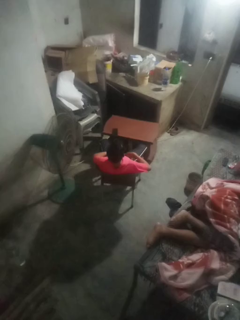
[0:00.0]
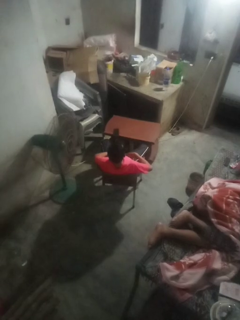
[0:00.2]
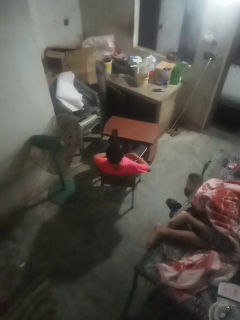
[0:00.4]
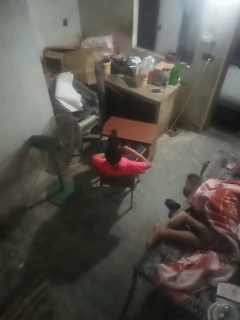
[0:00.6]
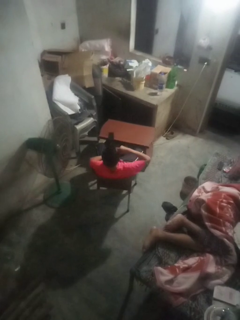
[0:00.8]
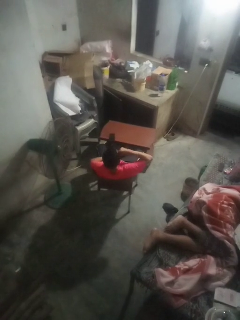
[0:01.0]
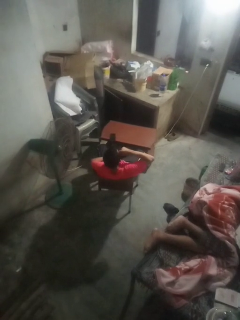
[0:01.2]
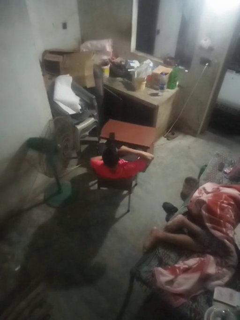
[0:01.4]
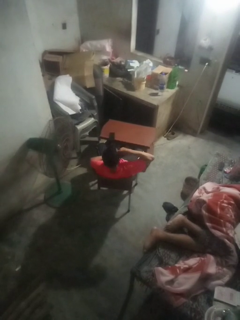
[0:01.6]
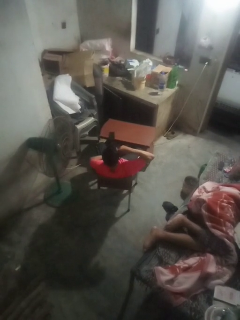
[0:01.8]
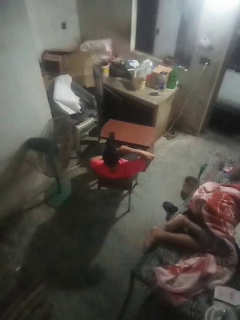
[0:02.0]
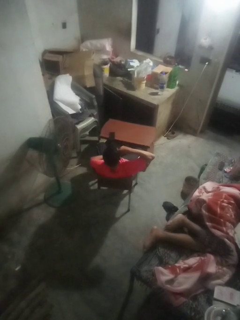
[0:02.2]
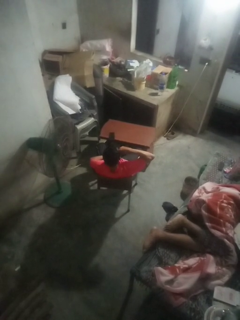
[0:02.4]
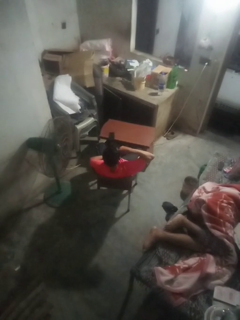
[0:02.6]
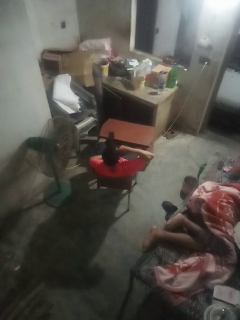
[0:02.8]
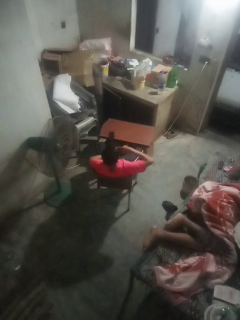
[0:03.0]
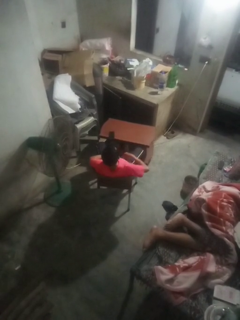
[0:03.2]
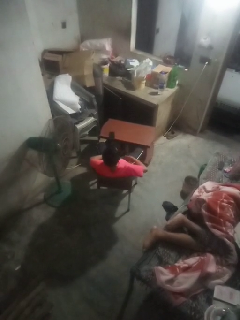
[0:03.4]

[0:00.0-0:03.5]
person licks fingers

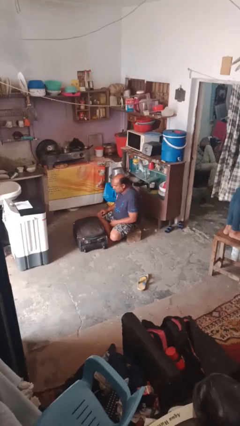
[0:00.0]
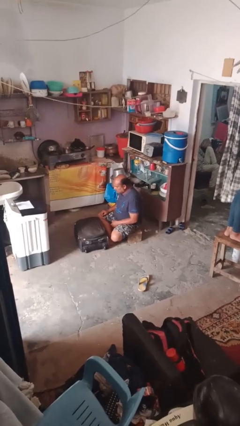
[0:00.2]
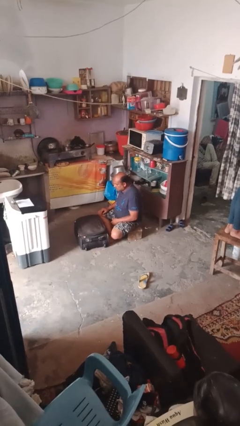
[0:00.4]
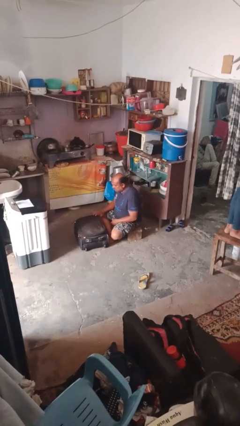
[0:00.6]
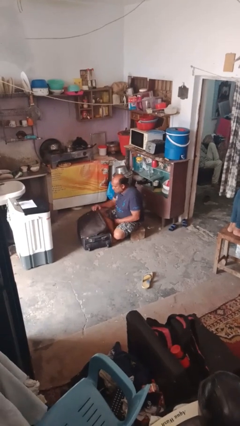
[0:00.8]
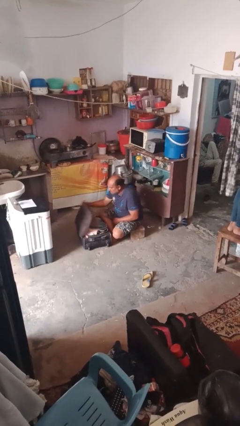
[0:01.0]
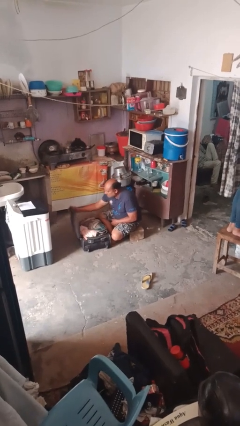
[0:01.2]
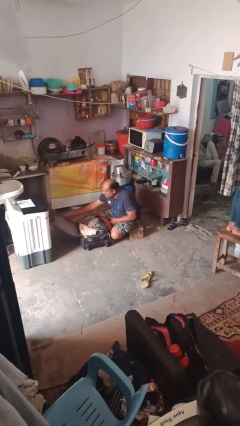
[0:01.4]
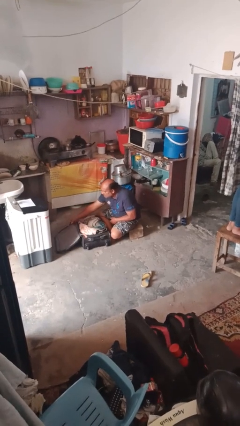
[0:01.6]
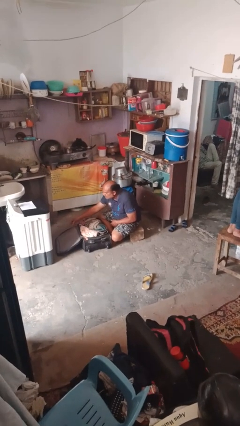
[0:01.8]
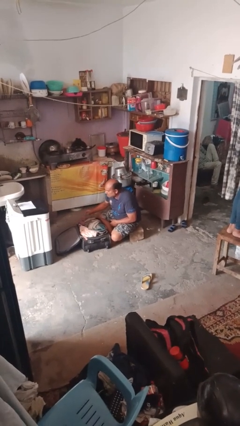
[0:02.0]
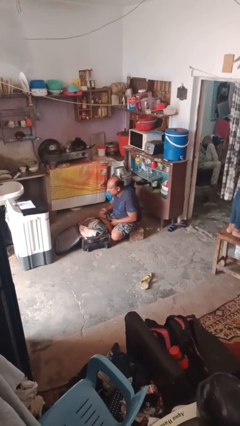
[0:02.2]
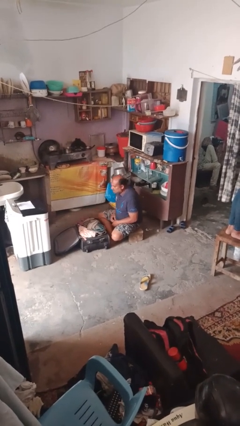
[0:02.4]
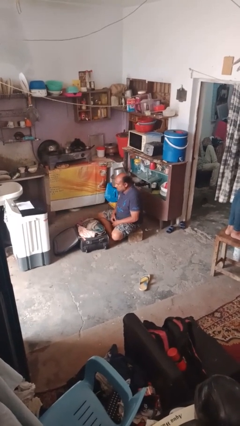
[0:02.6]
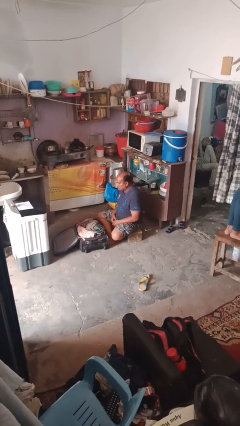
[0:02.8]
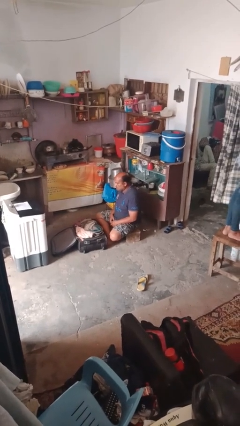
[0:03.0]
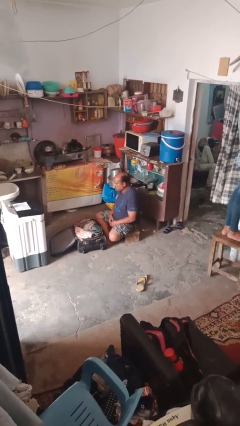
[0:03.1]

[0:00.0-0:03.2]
person opens suitcase

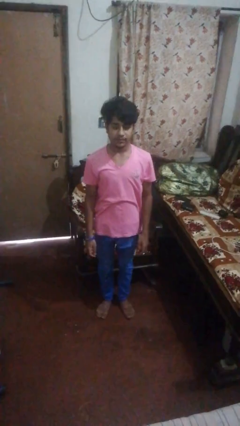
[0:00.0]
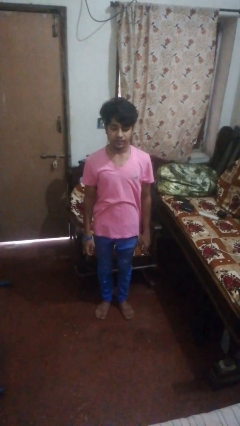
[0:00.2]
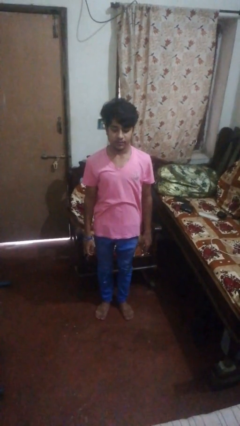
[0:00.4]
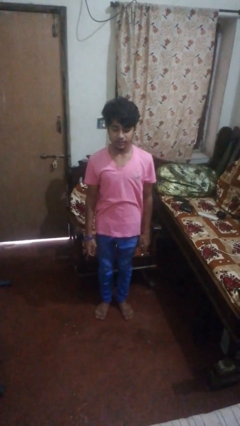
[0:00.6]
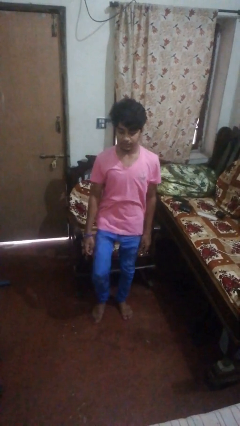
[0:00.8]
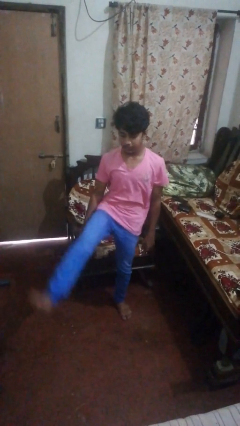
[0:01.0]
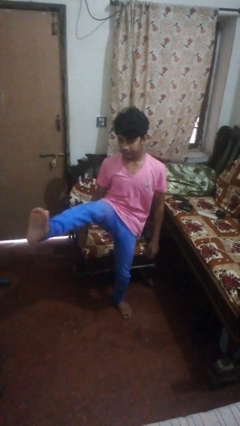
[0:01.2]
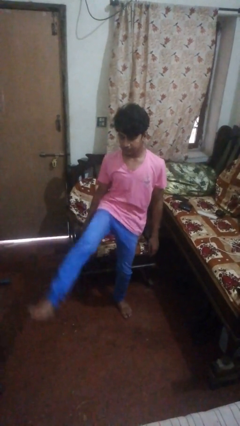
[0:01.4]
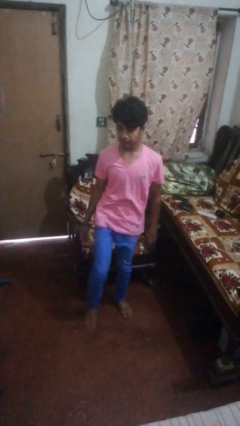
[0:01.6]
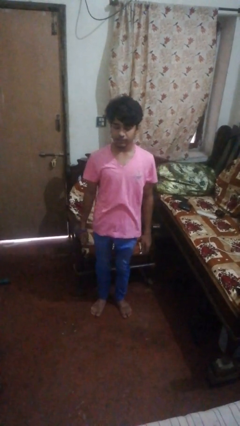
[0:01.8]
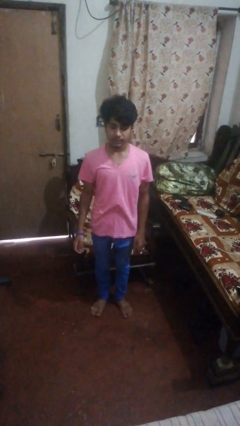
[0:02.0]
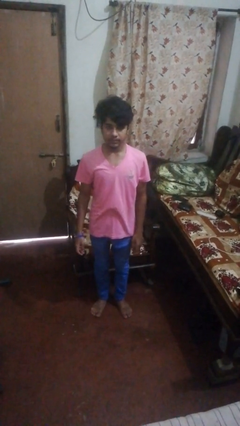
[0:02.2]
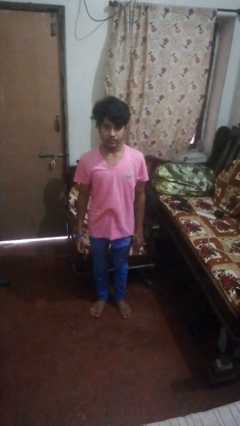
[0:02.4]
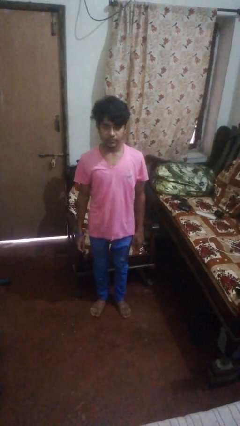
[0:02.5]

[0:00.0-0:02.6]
person karate kicks

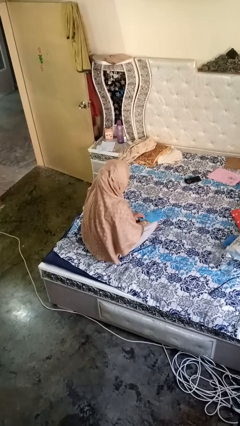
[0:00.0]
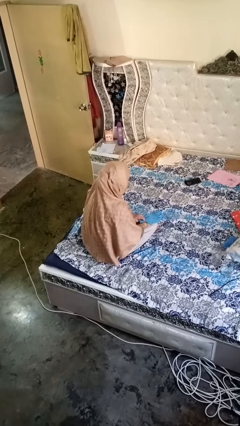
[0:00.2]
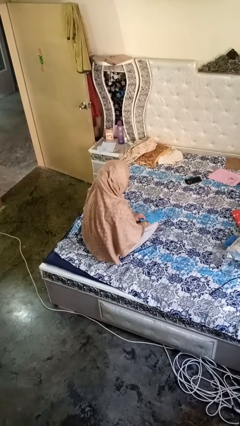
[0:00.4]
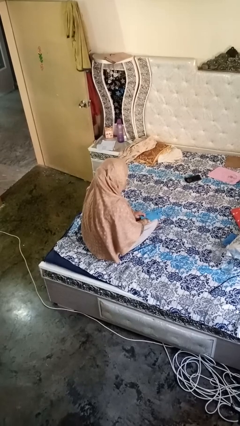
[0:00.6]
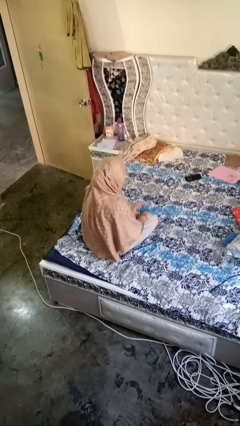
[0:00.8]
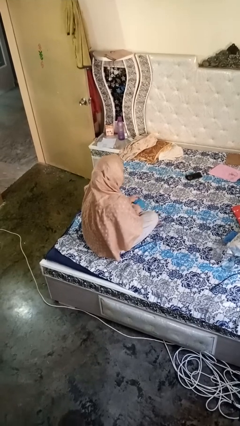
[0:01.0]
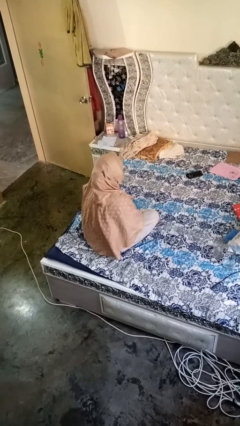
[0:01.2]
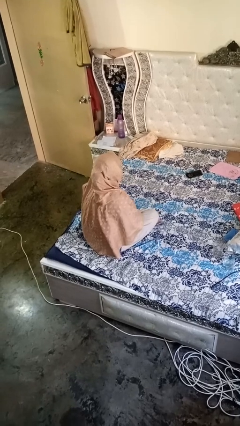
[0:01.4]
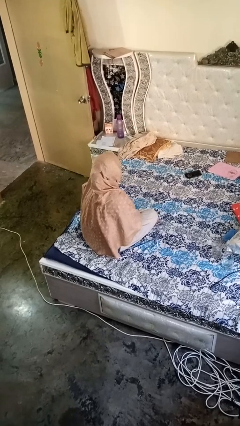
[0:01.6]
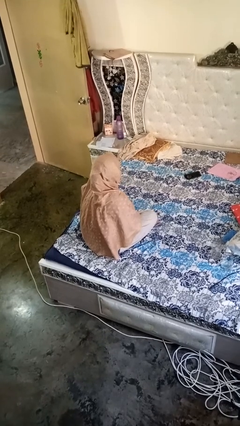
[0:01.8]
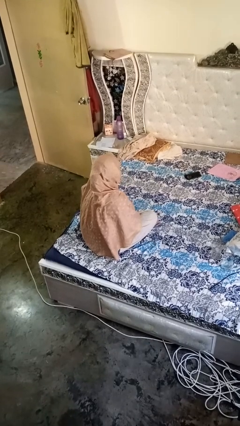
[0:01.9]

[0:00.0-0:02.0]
person takes off gloves

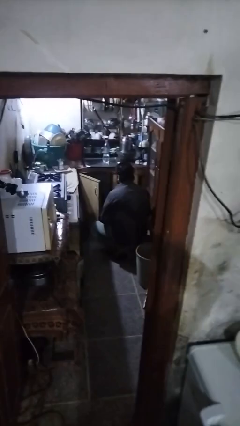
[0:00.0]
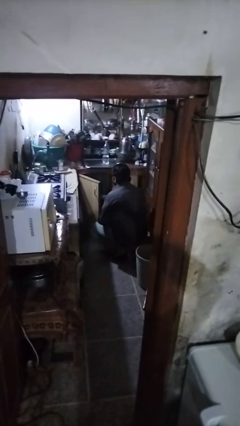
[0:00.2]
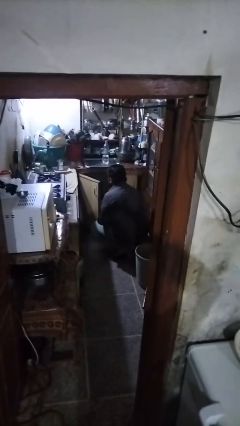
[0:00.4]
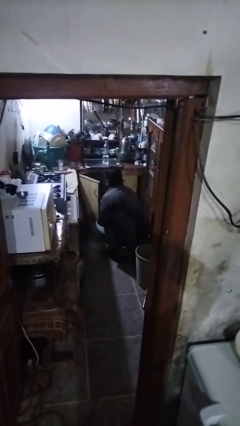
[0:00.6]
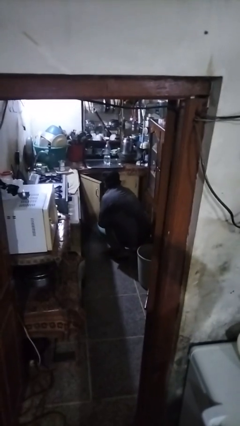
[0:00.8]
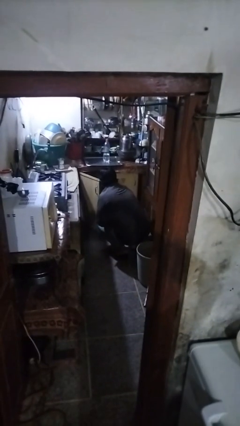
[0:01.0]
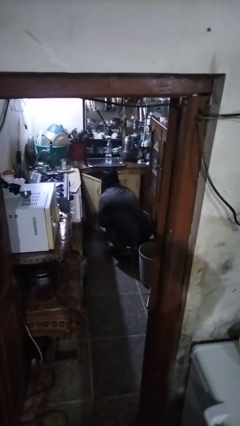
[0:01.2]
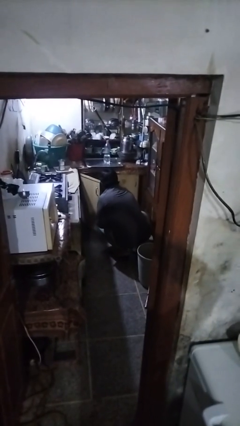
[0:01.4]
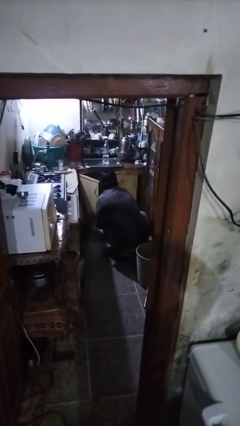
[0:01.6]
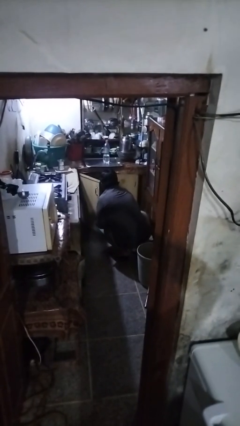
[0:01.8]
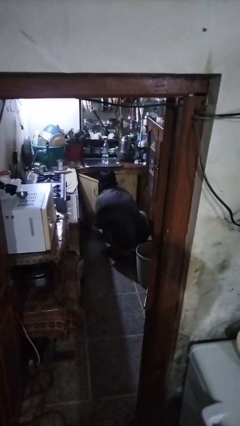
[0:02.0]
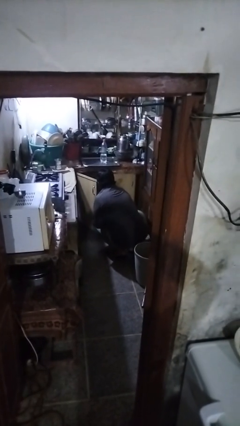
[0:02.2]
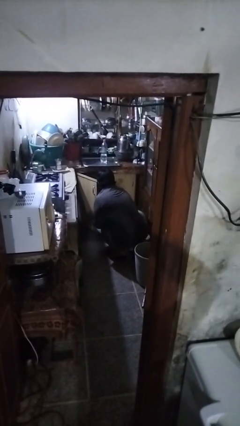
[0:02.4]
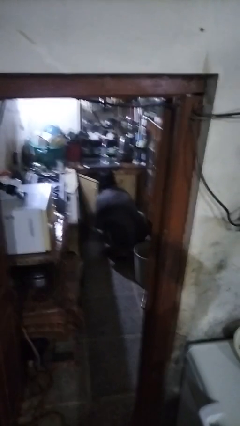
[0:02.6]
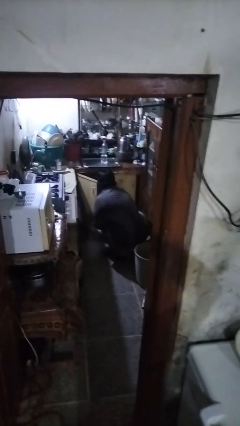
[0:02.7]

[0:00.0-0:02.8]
person puts object in cabinet

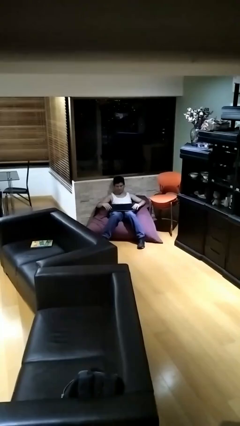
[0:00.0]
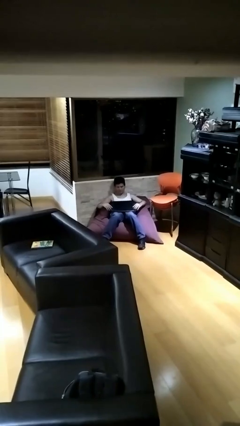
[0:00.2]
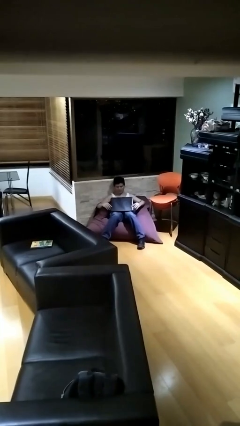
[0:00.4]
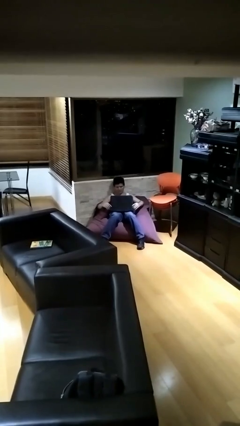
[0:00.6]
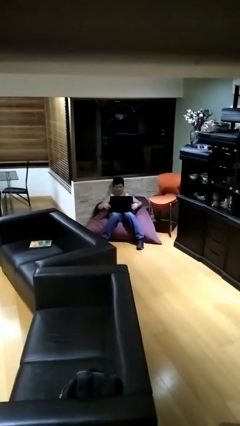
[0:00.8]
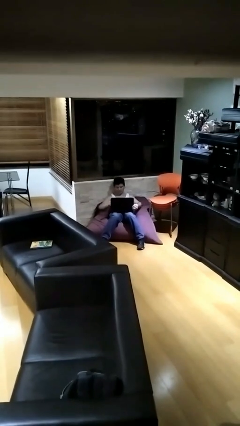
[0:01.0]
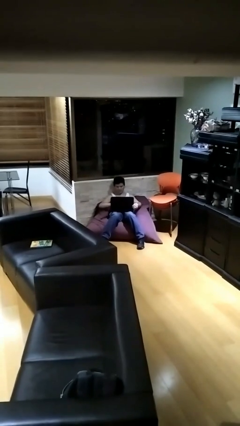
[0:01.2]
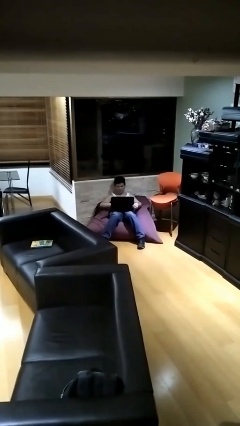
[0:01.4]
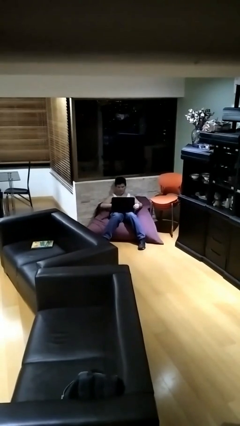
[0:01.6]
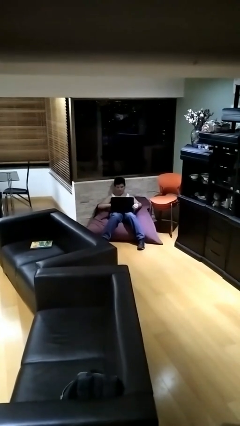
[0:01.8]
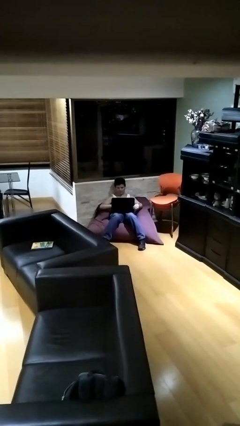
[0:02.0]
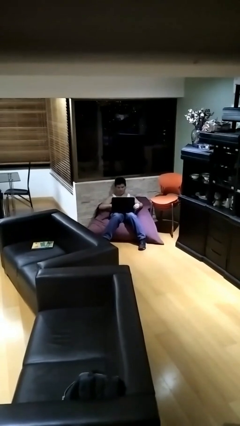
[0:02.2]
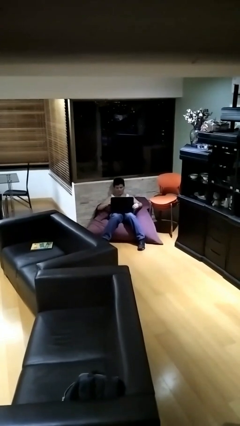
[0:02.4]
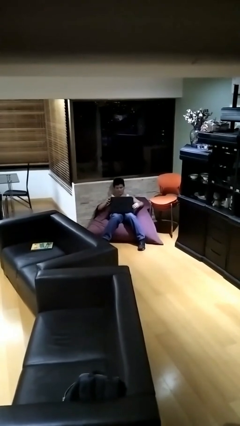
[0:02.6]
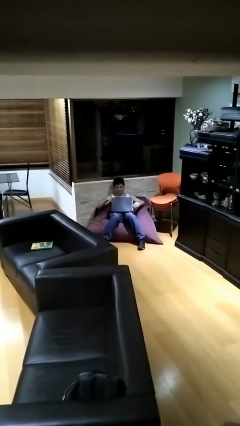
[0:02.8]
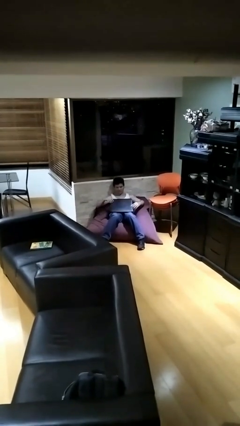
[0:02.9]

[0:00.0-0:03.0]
person interacts with laptop

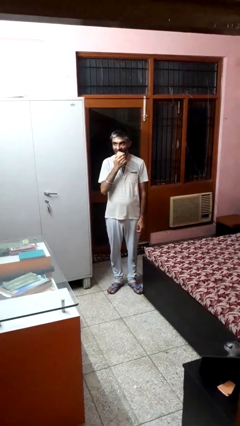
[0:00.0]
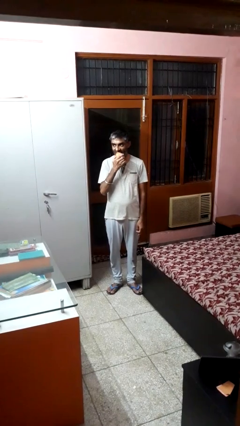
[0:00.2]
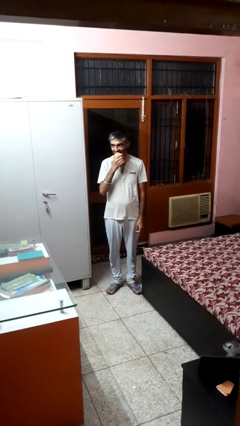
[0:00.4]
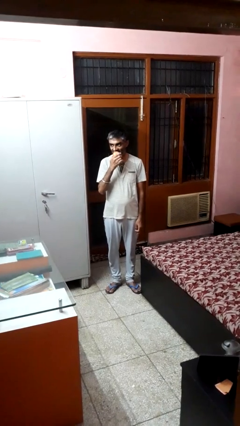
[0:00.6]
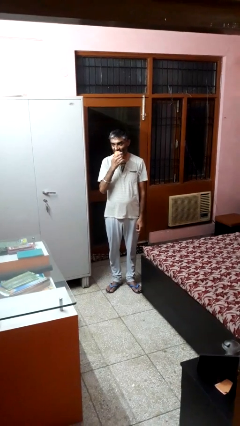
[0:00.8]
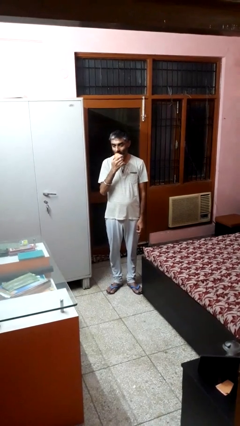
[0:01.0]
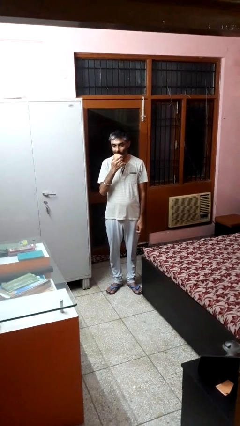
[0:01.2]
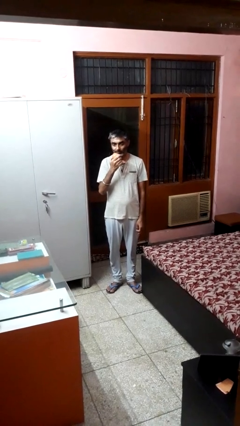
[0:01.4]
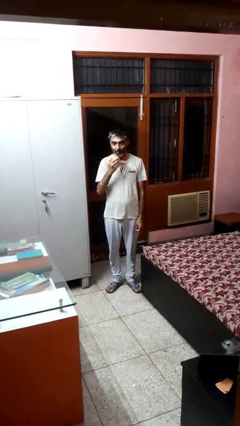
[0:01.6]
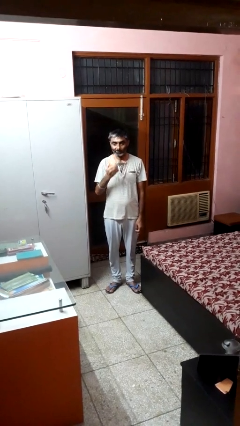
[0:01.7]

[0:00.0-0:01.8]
person eats apple
